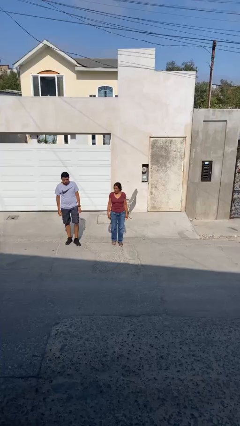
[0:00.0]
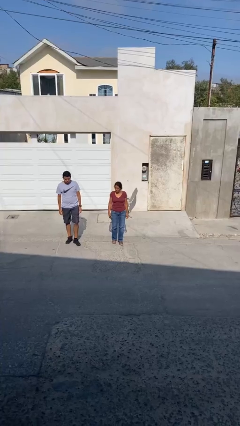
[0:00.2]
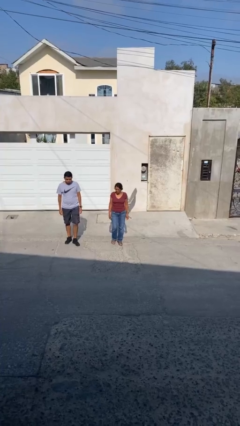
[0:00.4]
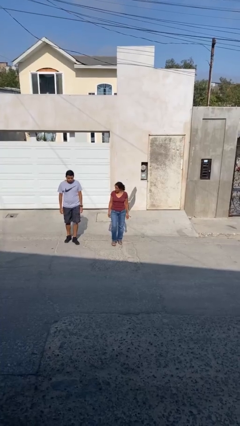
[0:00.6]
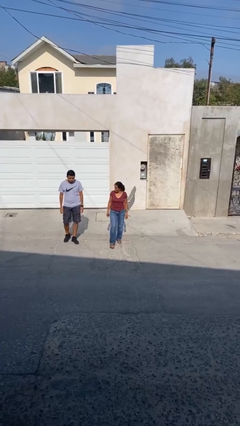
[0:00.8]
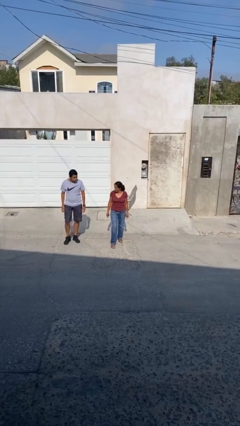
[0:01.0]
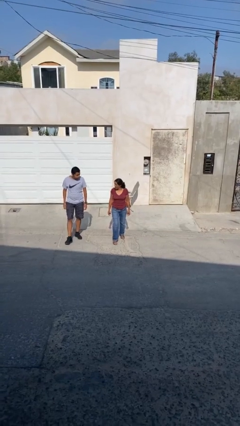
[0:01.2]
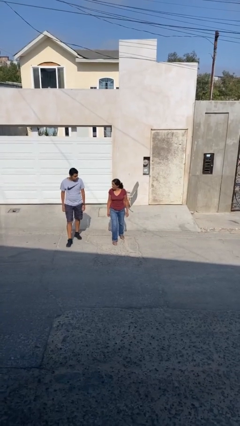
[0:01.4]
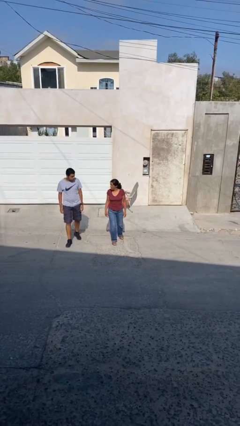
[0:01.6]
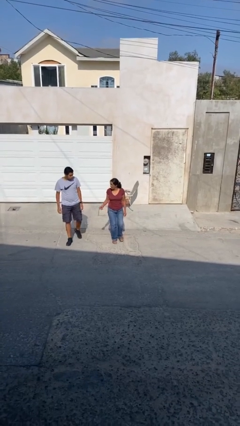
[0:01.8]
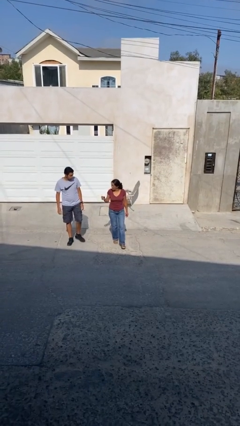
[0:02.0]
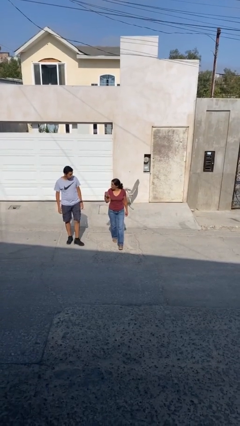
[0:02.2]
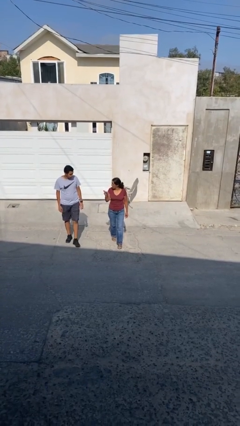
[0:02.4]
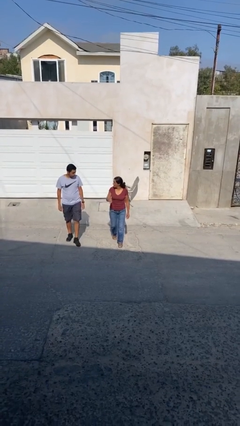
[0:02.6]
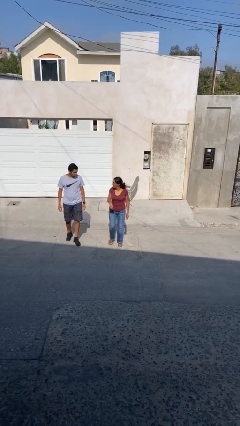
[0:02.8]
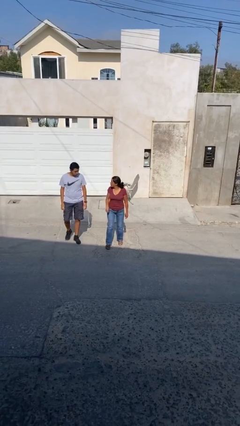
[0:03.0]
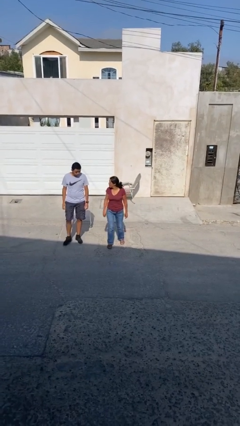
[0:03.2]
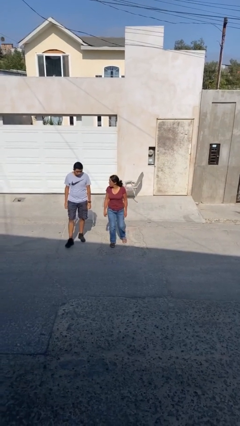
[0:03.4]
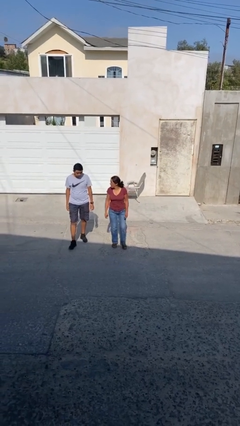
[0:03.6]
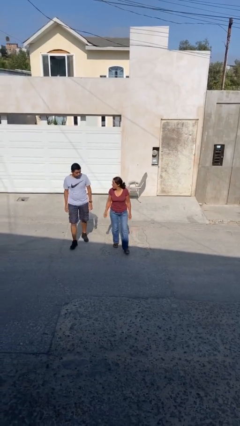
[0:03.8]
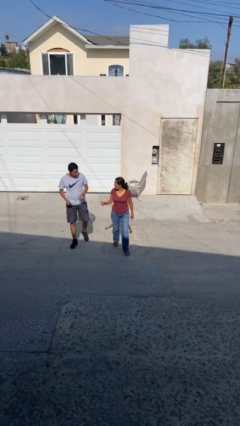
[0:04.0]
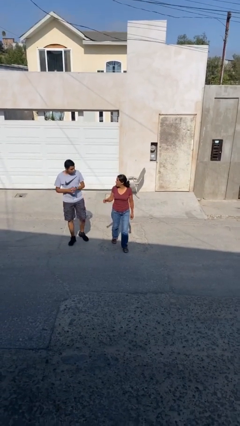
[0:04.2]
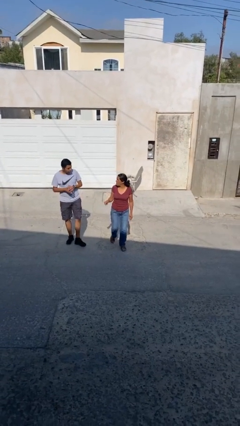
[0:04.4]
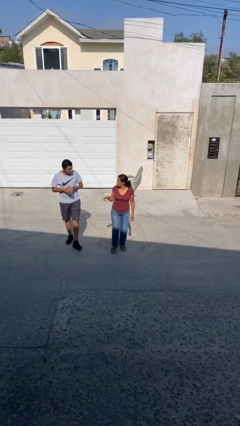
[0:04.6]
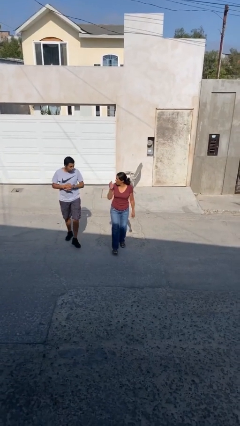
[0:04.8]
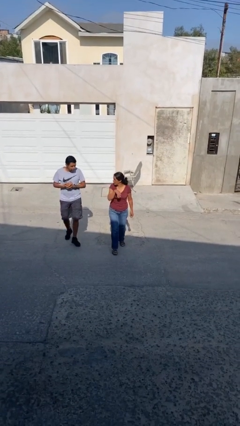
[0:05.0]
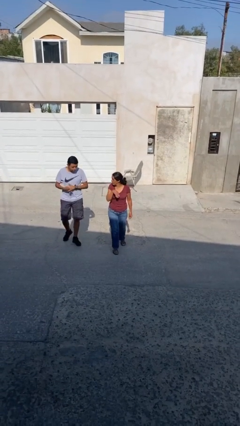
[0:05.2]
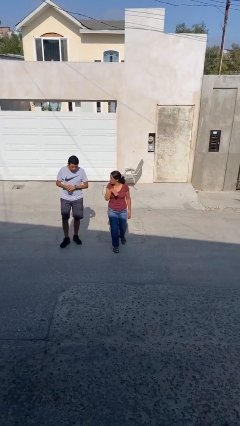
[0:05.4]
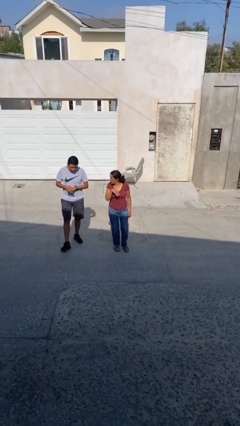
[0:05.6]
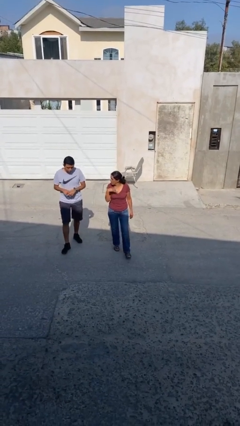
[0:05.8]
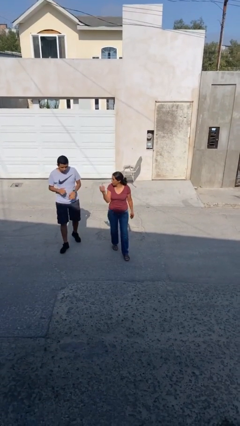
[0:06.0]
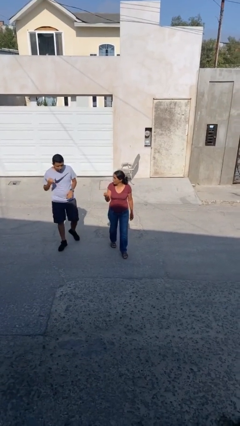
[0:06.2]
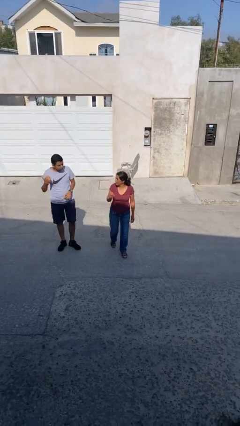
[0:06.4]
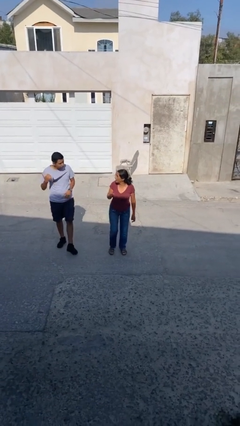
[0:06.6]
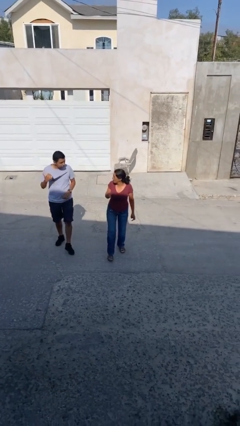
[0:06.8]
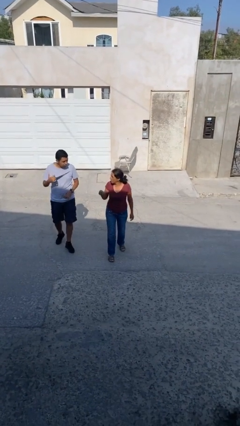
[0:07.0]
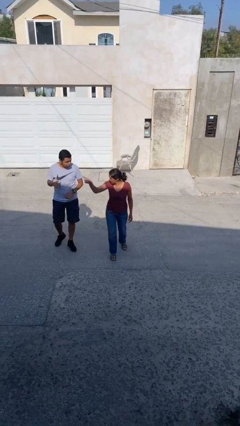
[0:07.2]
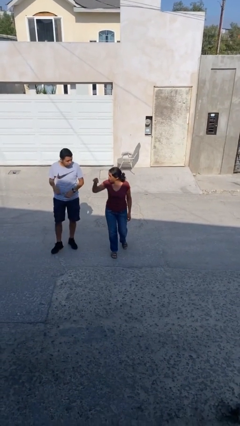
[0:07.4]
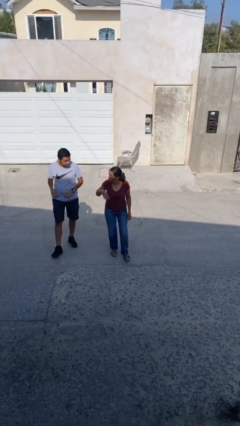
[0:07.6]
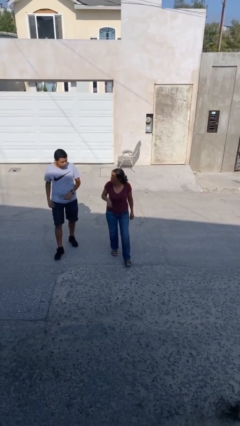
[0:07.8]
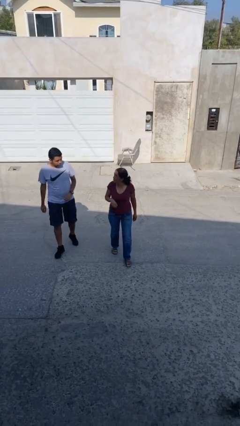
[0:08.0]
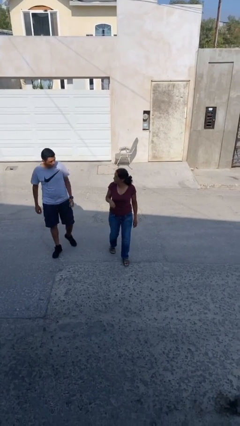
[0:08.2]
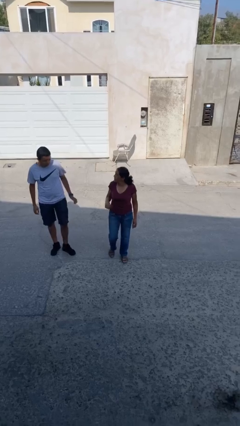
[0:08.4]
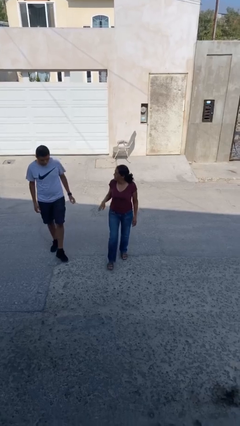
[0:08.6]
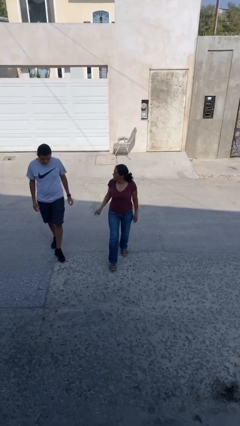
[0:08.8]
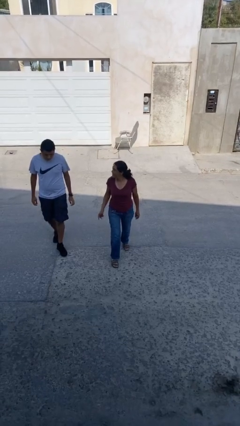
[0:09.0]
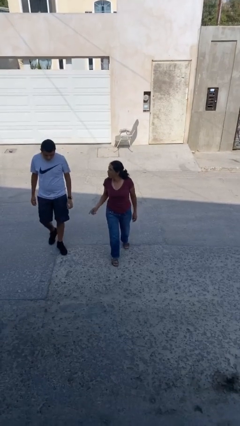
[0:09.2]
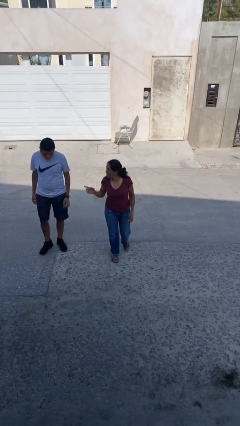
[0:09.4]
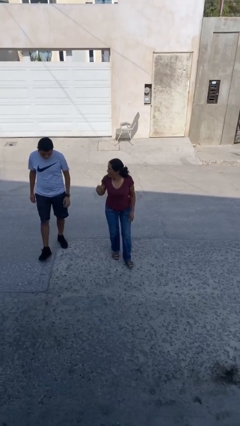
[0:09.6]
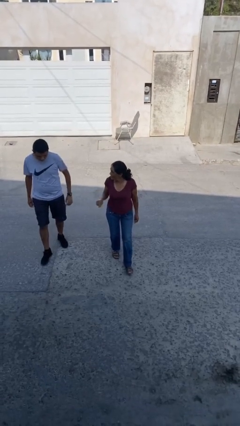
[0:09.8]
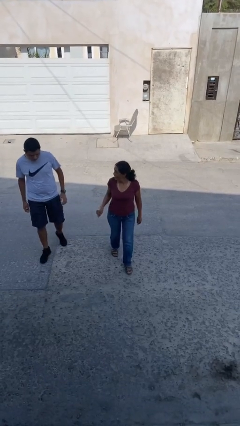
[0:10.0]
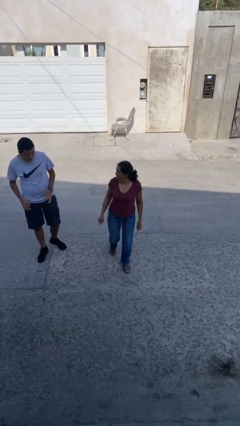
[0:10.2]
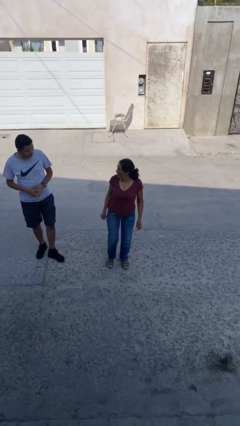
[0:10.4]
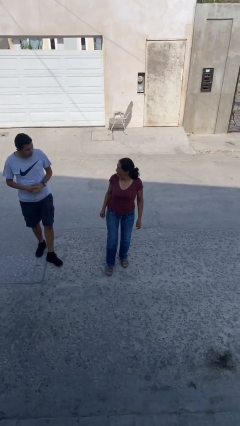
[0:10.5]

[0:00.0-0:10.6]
person talks to person

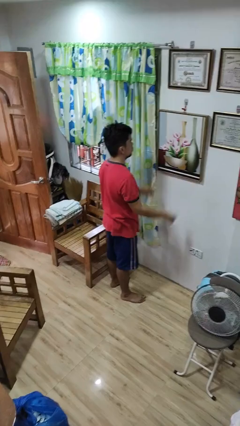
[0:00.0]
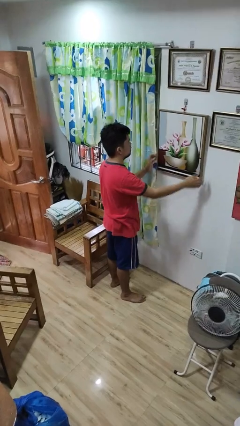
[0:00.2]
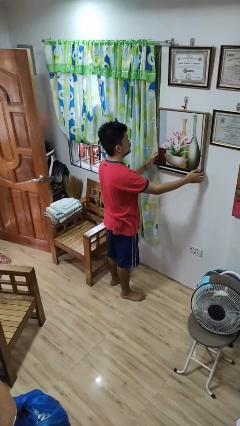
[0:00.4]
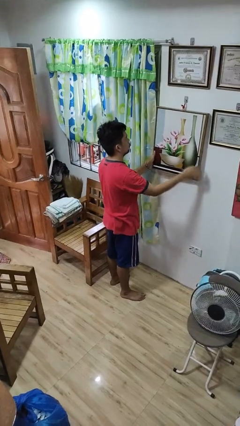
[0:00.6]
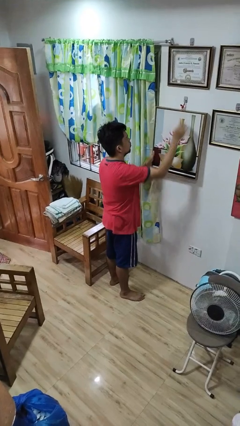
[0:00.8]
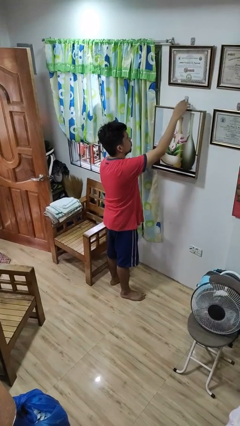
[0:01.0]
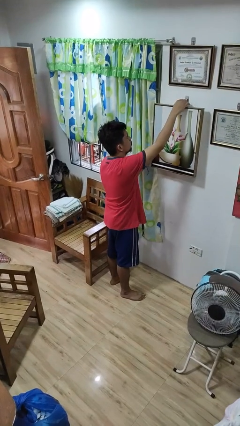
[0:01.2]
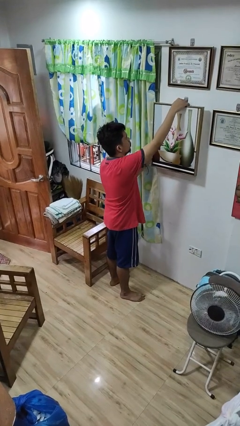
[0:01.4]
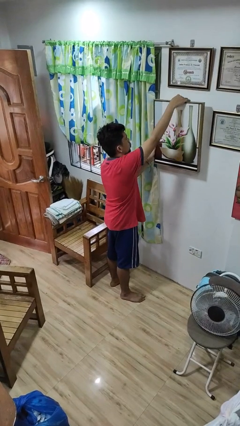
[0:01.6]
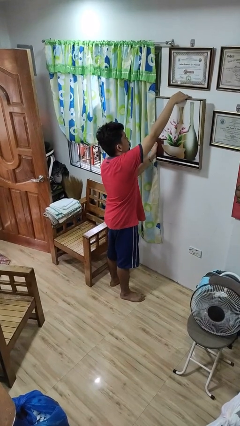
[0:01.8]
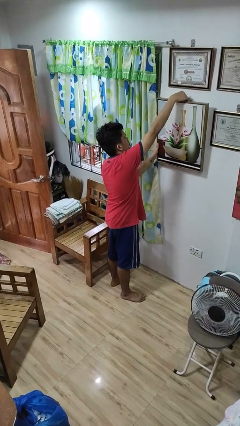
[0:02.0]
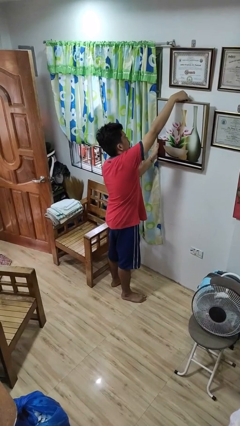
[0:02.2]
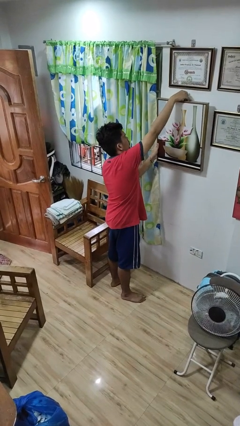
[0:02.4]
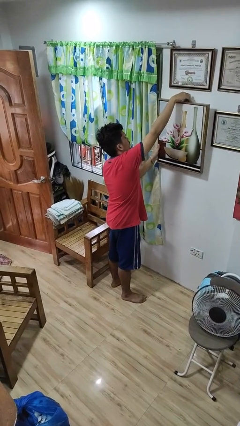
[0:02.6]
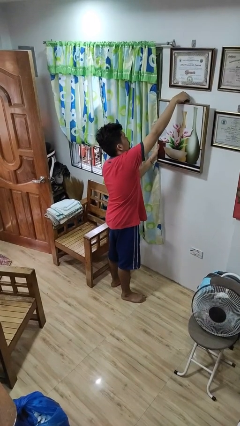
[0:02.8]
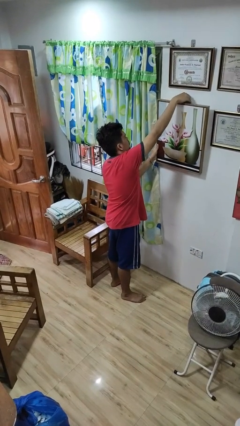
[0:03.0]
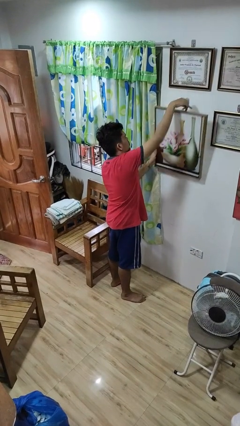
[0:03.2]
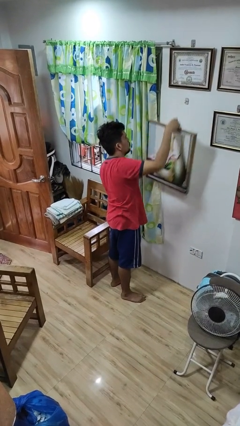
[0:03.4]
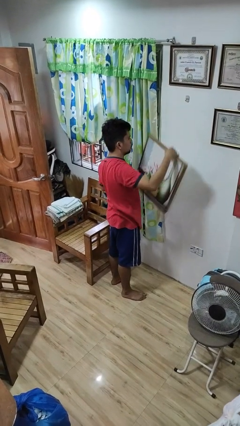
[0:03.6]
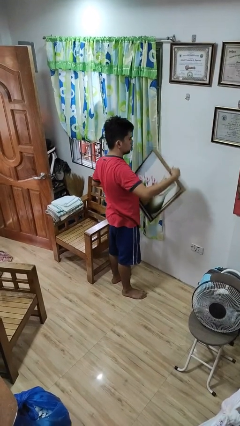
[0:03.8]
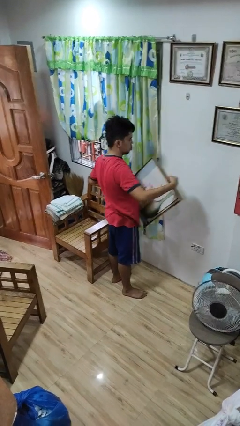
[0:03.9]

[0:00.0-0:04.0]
person takes down picture frame

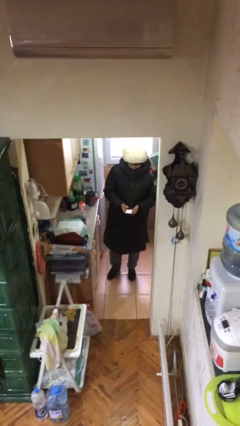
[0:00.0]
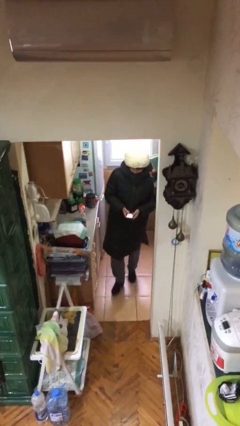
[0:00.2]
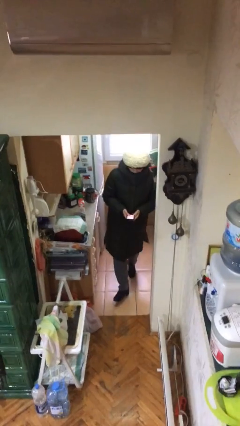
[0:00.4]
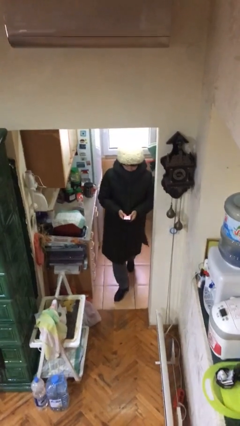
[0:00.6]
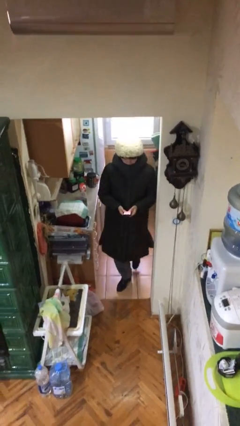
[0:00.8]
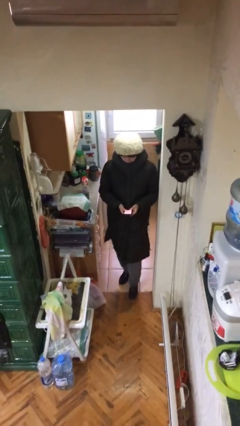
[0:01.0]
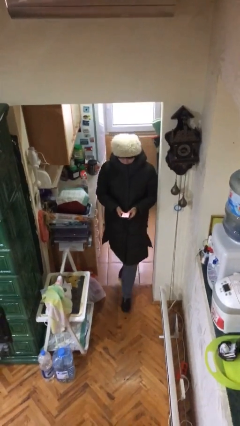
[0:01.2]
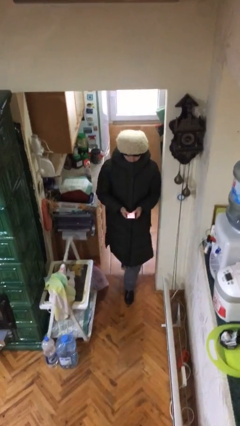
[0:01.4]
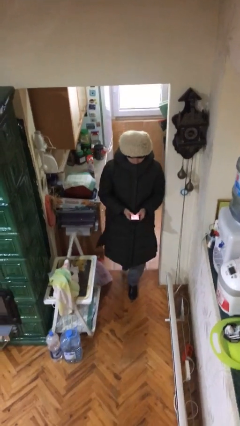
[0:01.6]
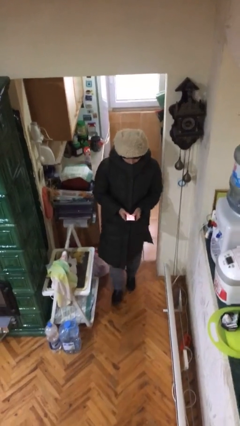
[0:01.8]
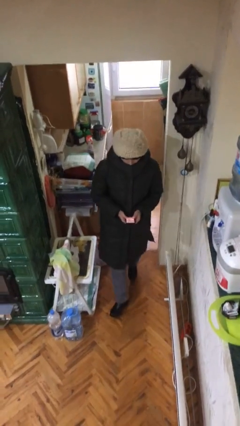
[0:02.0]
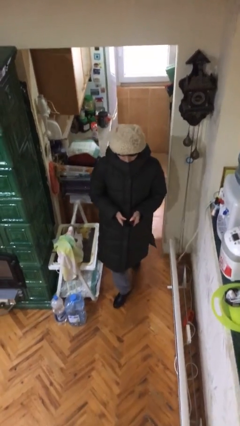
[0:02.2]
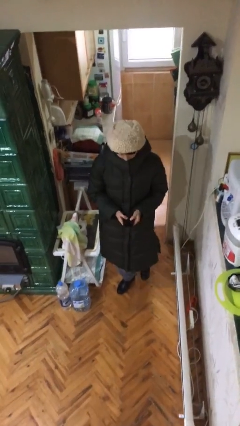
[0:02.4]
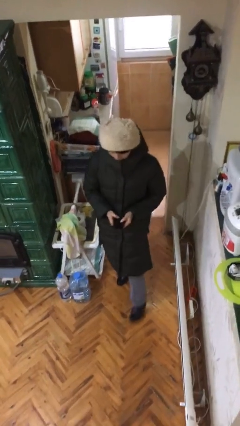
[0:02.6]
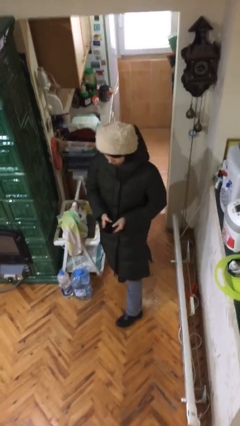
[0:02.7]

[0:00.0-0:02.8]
person enters scene through structure

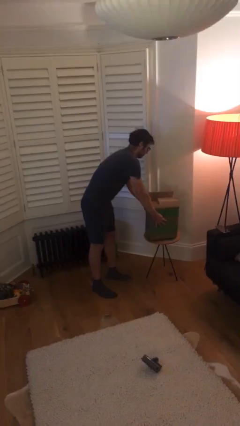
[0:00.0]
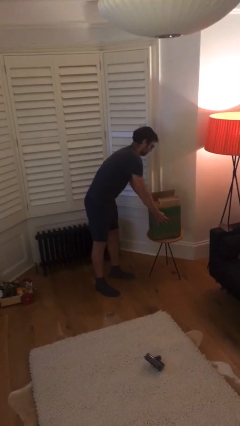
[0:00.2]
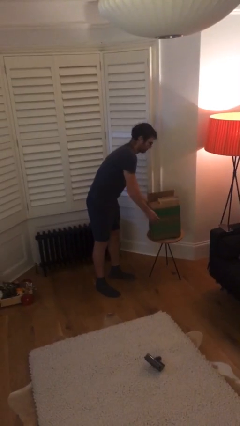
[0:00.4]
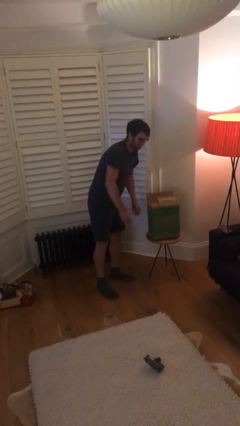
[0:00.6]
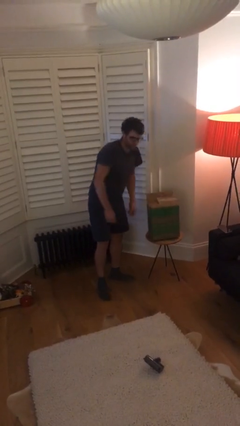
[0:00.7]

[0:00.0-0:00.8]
person puts down object on table
